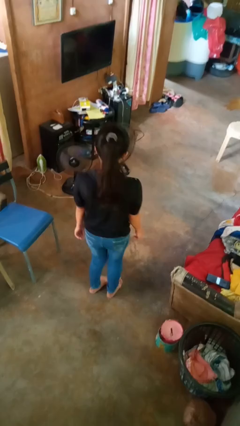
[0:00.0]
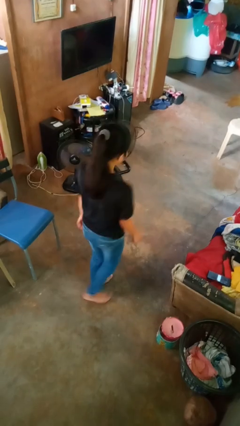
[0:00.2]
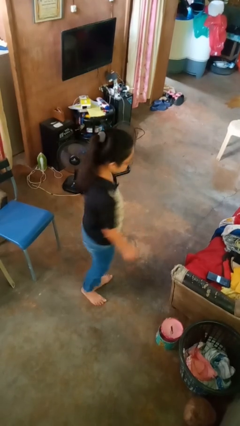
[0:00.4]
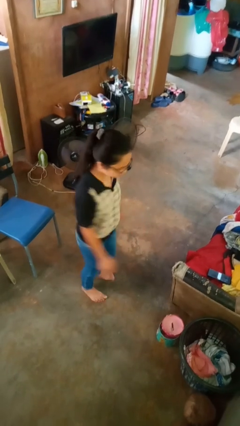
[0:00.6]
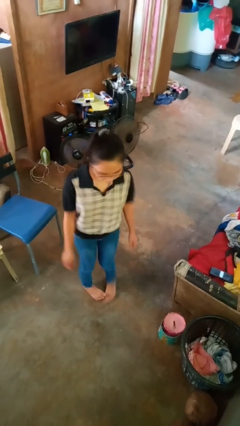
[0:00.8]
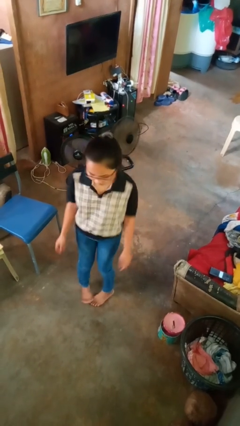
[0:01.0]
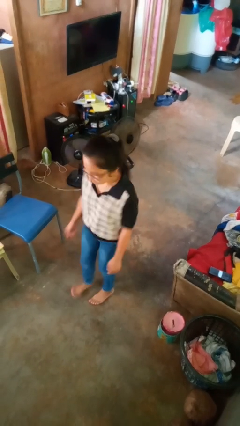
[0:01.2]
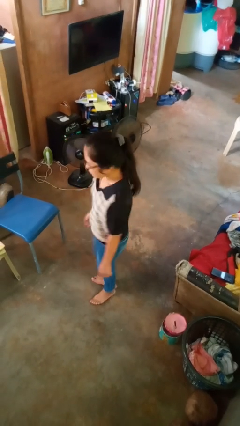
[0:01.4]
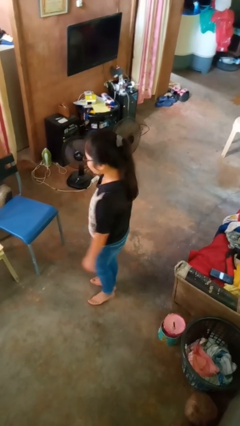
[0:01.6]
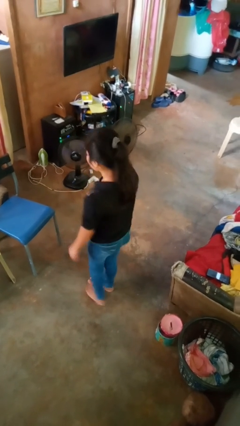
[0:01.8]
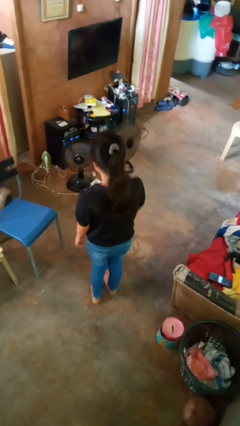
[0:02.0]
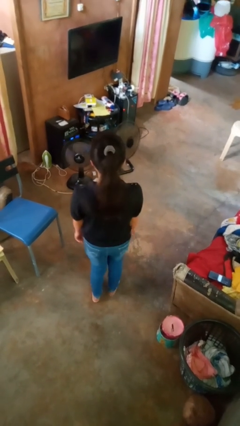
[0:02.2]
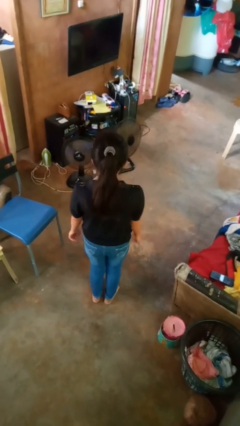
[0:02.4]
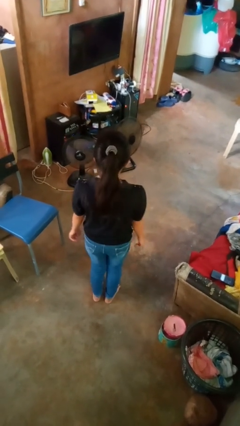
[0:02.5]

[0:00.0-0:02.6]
person twirls

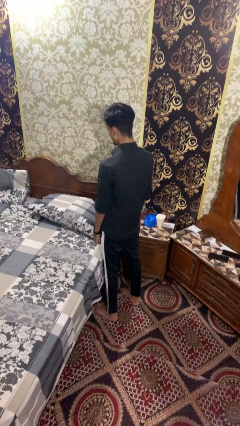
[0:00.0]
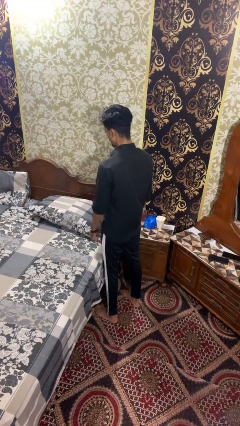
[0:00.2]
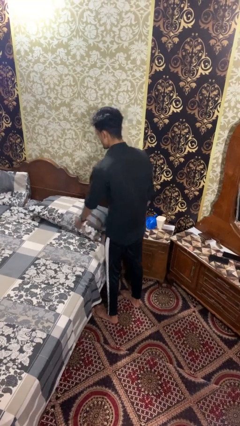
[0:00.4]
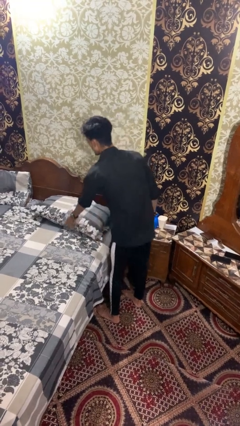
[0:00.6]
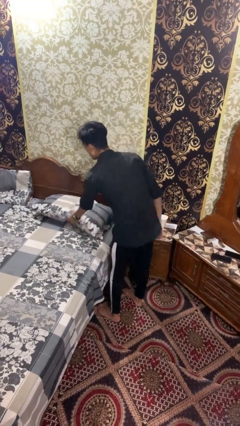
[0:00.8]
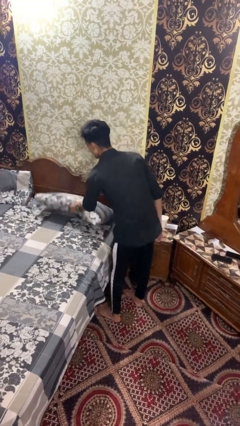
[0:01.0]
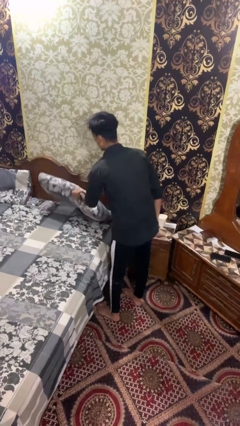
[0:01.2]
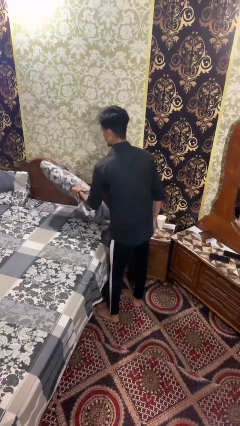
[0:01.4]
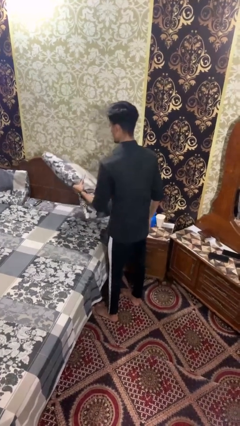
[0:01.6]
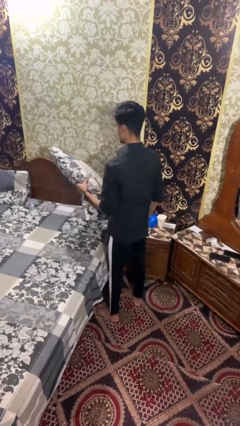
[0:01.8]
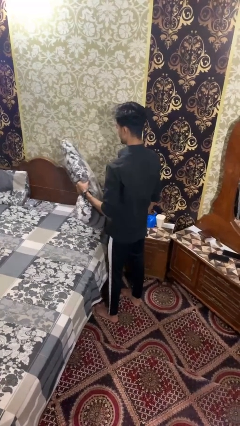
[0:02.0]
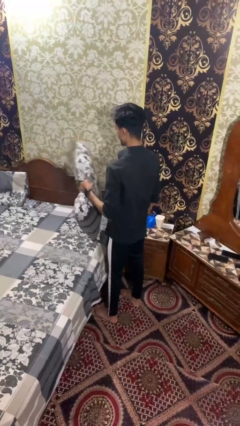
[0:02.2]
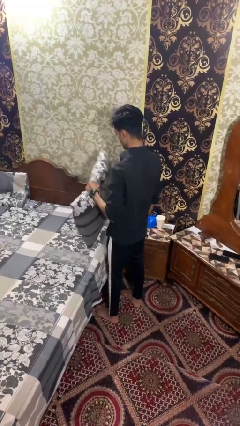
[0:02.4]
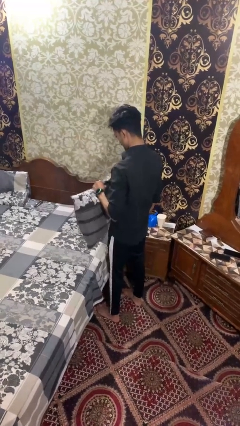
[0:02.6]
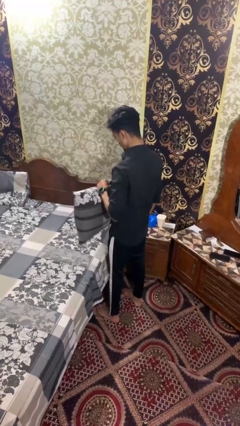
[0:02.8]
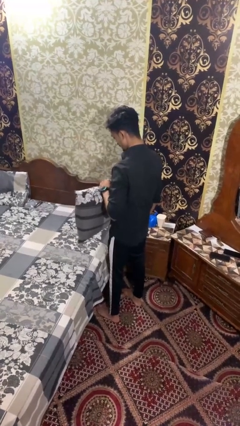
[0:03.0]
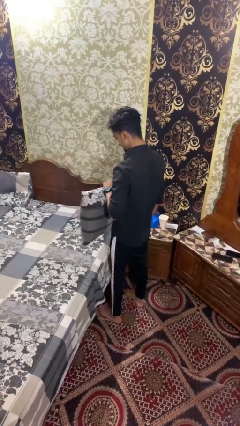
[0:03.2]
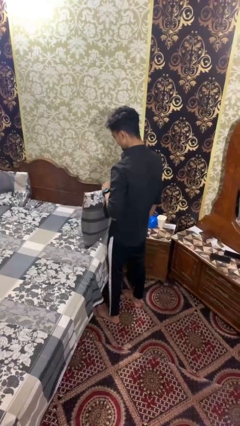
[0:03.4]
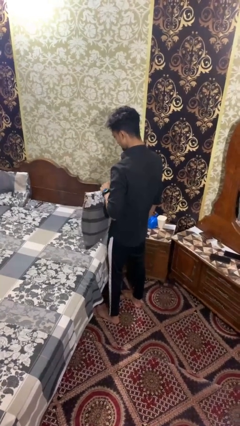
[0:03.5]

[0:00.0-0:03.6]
person picks up object from bed

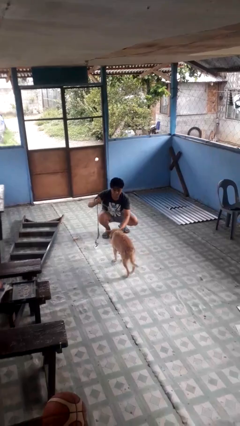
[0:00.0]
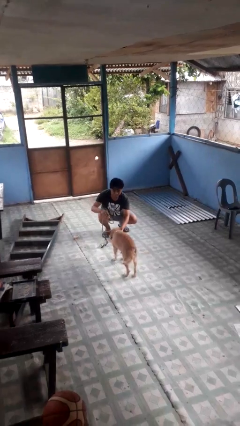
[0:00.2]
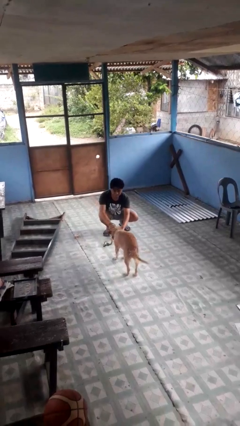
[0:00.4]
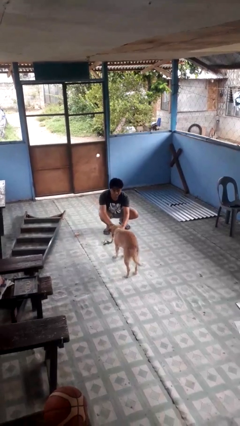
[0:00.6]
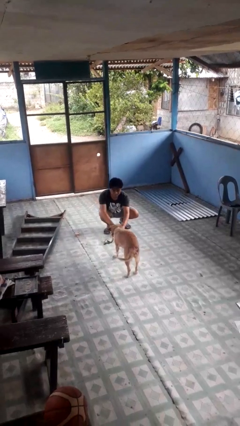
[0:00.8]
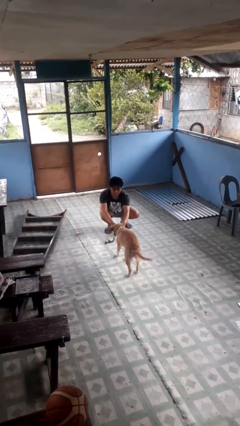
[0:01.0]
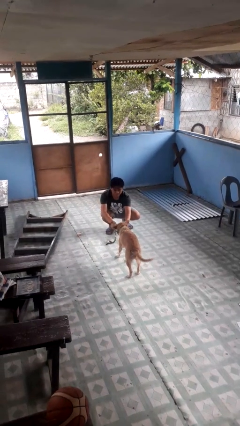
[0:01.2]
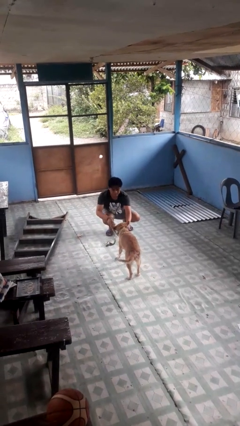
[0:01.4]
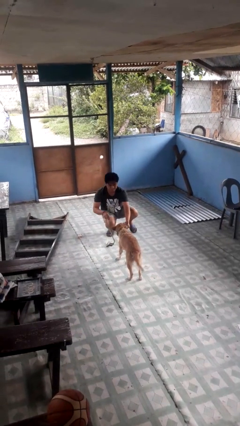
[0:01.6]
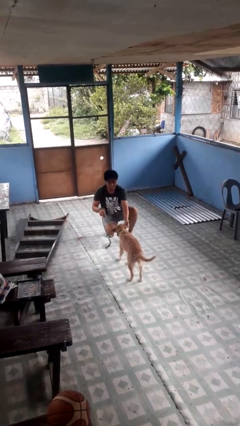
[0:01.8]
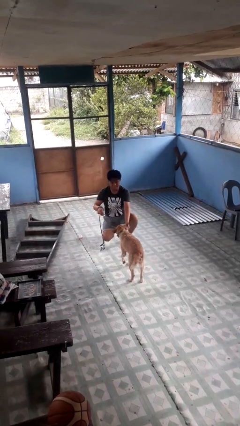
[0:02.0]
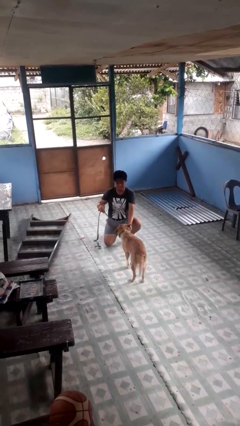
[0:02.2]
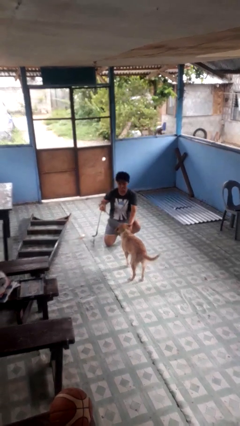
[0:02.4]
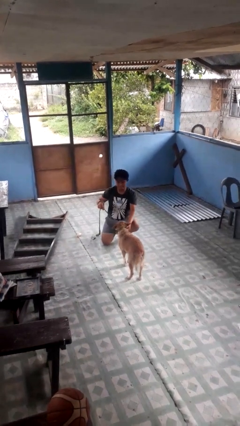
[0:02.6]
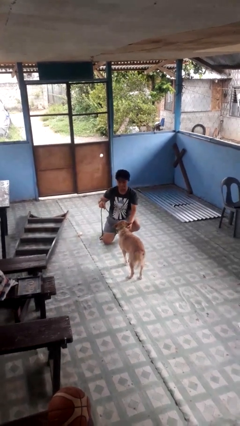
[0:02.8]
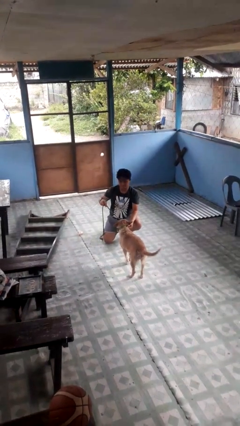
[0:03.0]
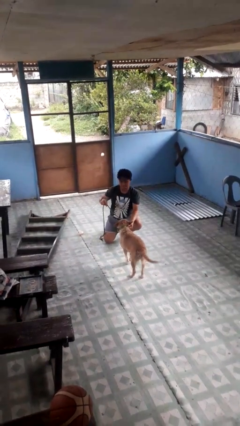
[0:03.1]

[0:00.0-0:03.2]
person attaches leash to dog

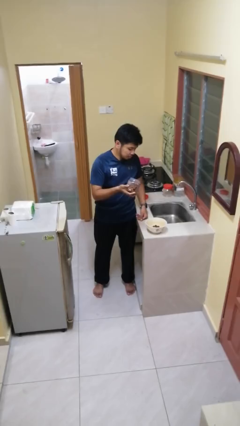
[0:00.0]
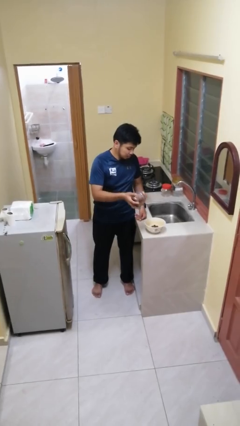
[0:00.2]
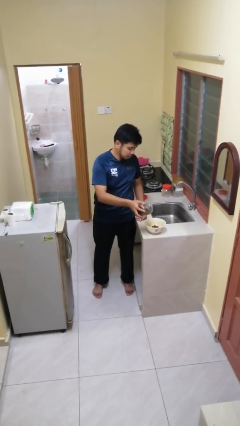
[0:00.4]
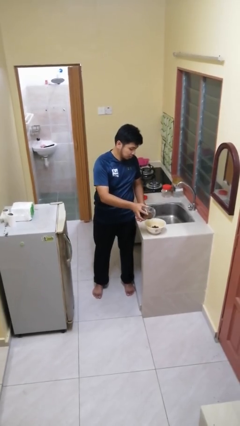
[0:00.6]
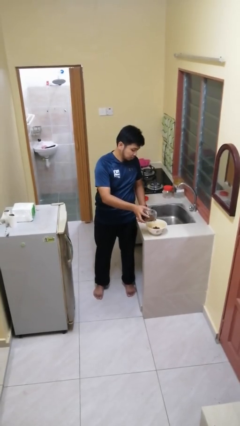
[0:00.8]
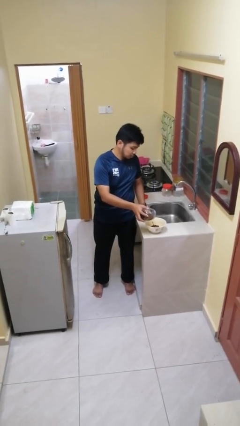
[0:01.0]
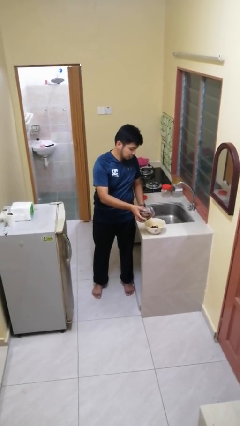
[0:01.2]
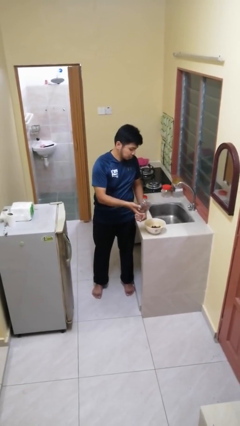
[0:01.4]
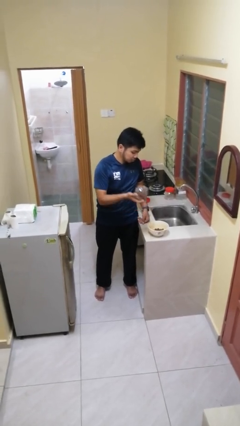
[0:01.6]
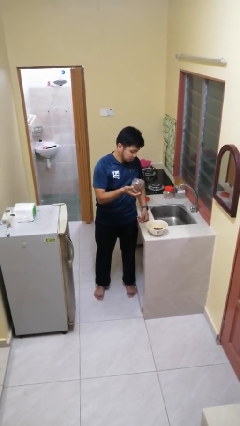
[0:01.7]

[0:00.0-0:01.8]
person pours into bowl

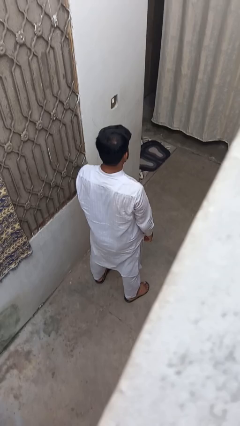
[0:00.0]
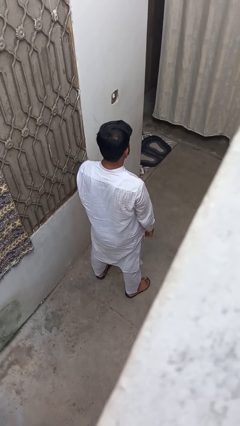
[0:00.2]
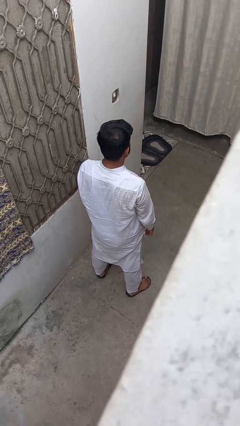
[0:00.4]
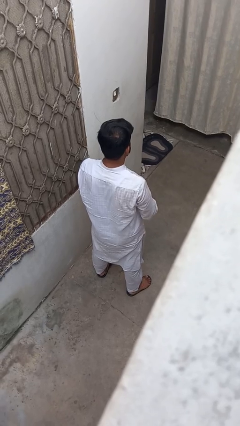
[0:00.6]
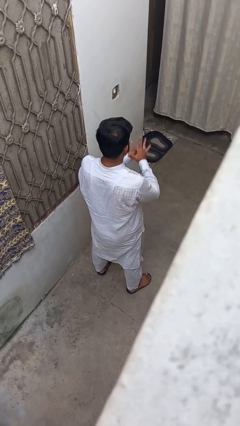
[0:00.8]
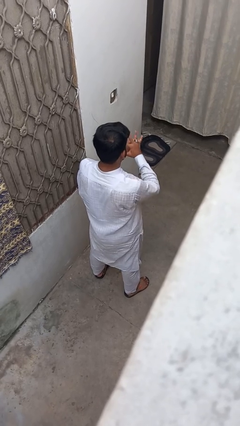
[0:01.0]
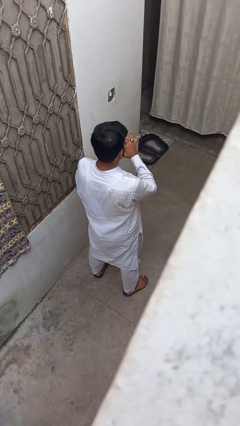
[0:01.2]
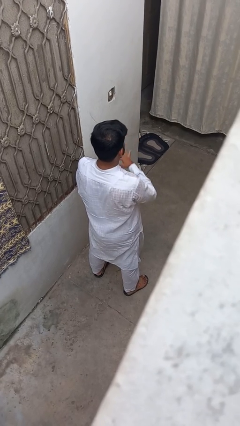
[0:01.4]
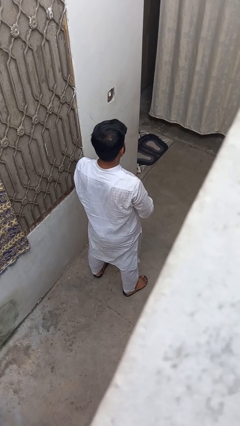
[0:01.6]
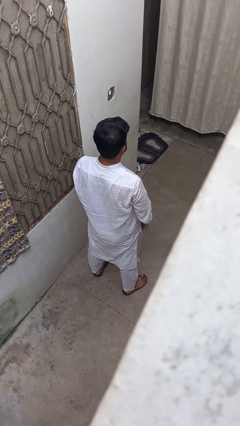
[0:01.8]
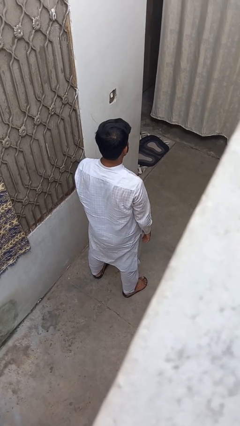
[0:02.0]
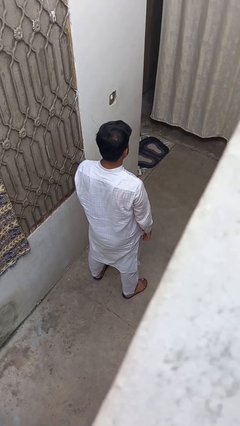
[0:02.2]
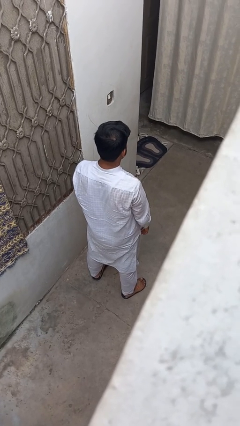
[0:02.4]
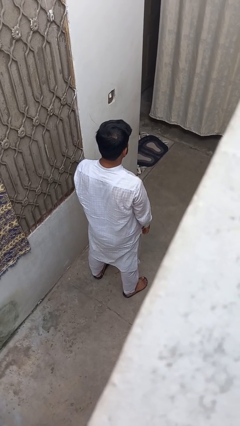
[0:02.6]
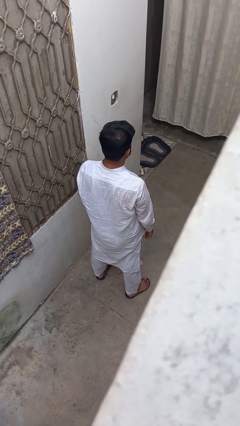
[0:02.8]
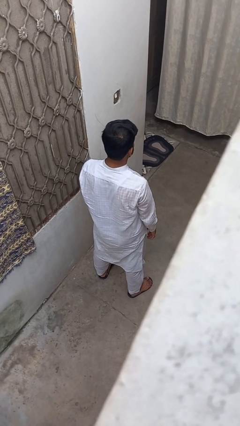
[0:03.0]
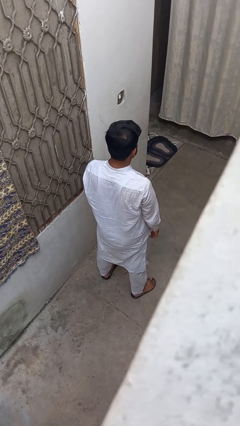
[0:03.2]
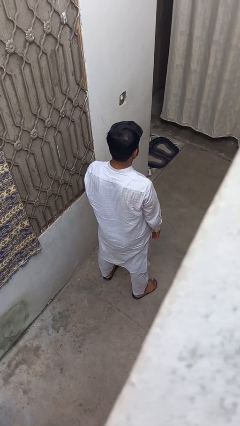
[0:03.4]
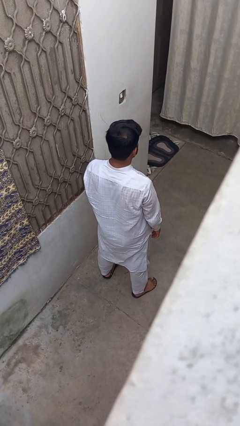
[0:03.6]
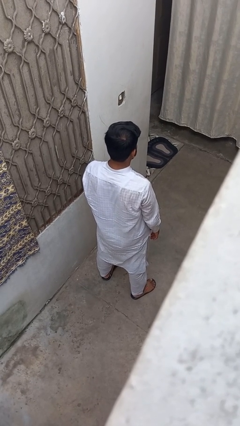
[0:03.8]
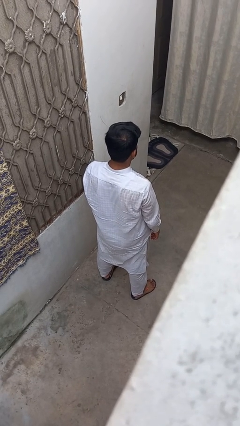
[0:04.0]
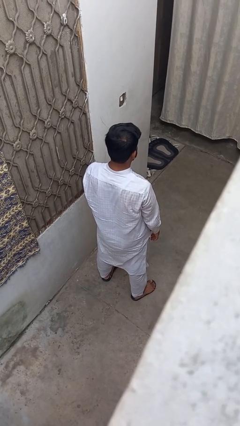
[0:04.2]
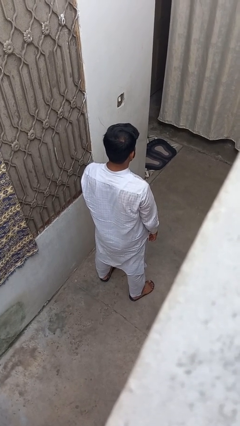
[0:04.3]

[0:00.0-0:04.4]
person takes off ring

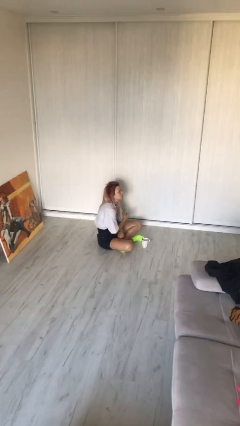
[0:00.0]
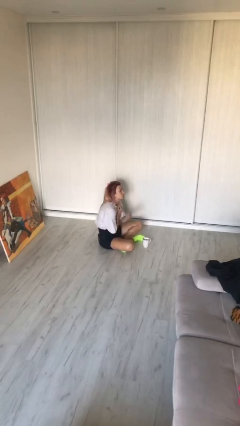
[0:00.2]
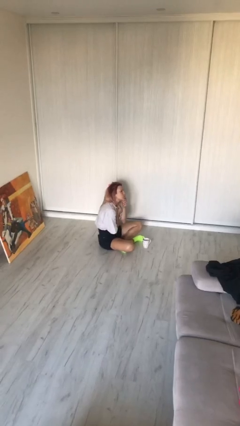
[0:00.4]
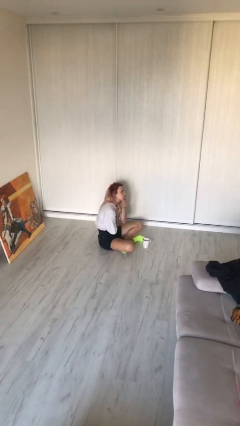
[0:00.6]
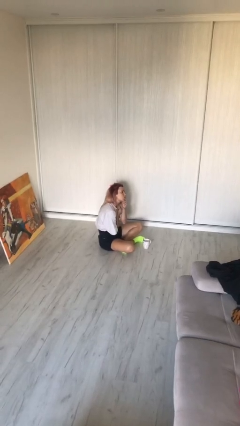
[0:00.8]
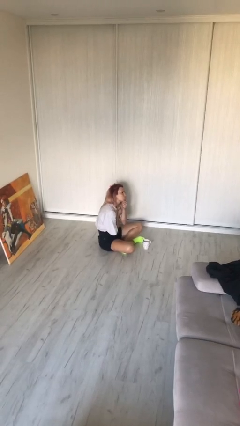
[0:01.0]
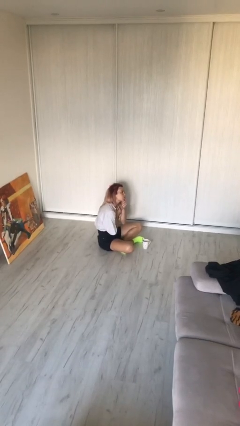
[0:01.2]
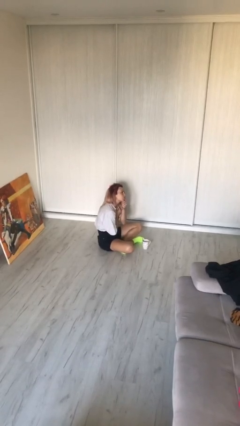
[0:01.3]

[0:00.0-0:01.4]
person strokes chin

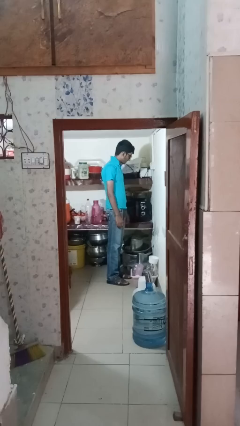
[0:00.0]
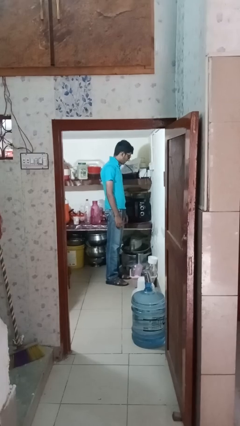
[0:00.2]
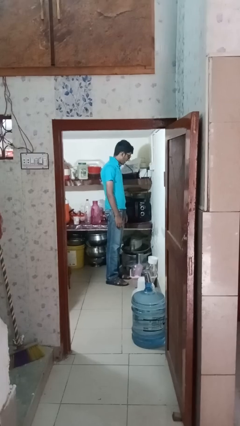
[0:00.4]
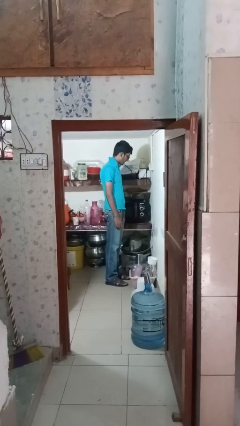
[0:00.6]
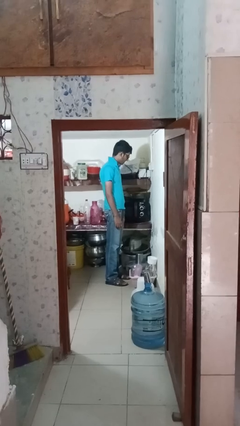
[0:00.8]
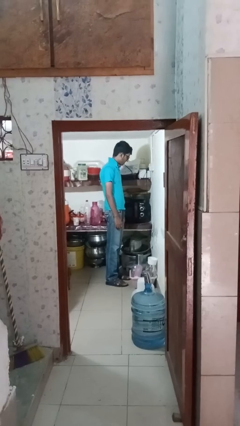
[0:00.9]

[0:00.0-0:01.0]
person closes oven door
